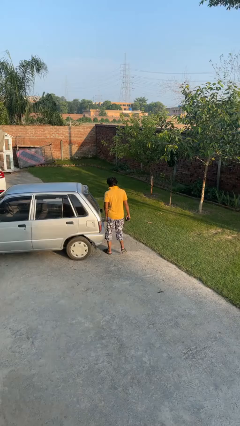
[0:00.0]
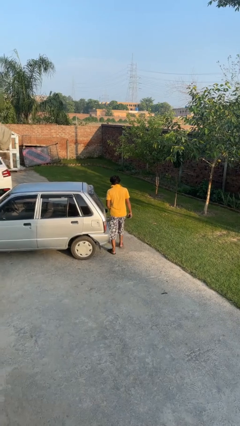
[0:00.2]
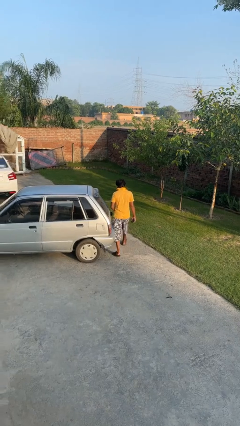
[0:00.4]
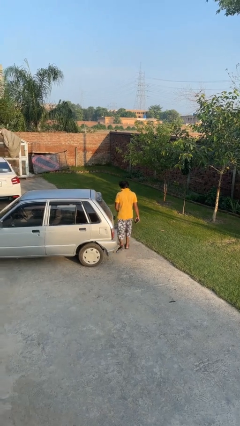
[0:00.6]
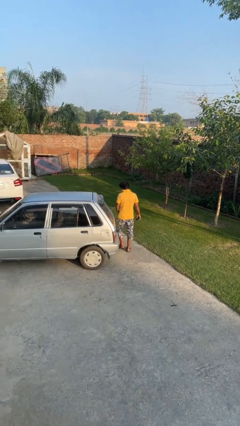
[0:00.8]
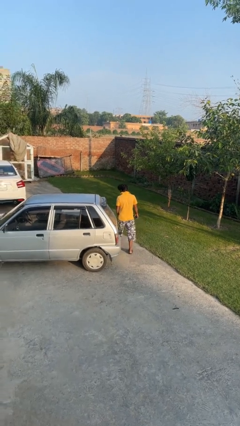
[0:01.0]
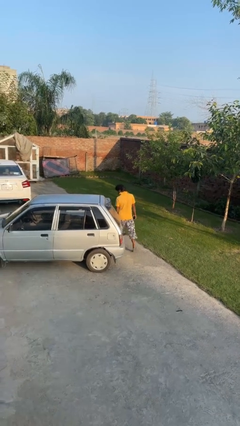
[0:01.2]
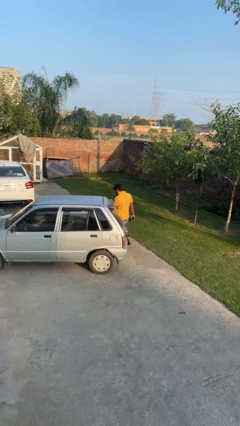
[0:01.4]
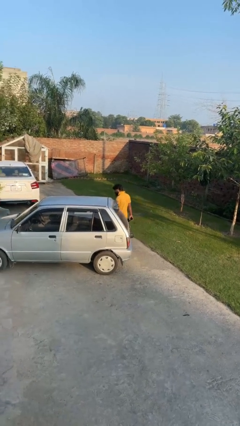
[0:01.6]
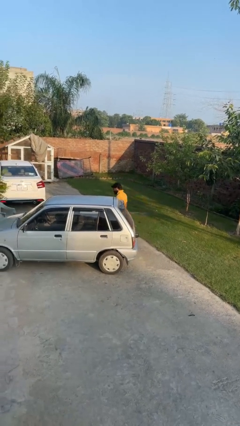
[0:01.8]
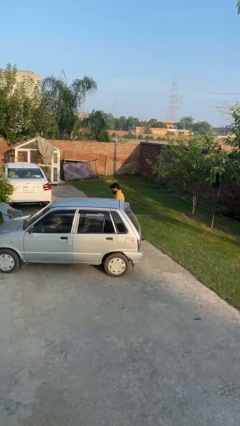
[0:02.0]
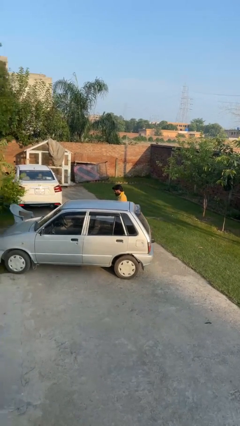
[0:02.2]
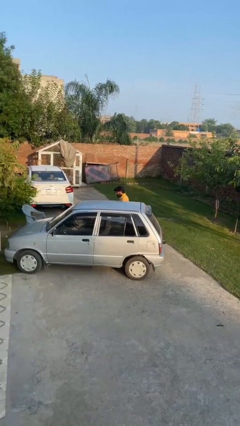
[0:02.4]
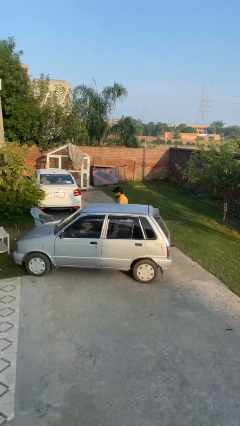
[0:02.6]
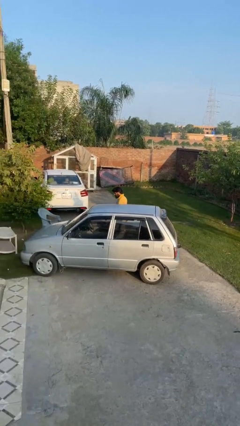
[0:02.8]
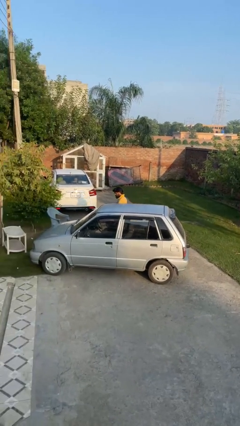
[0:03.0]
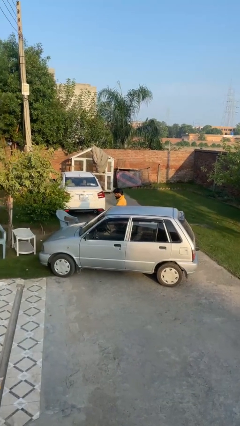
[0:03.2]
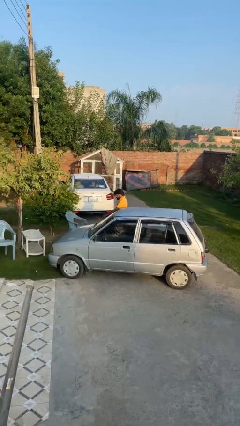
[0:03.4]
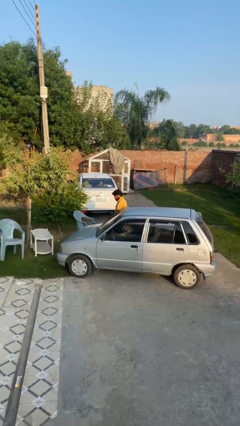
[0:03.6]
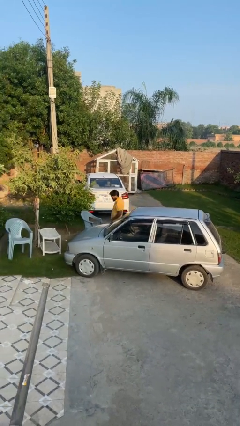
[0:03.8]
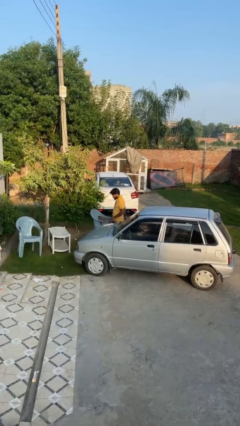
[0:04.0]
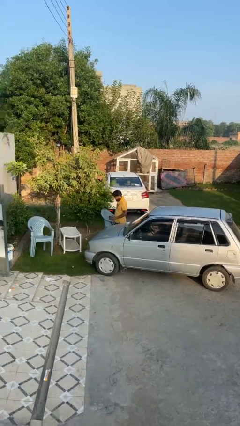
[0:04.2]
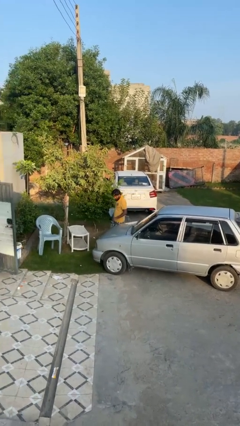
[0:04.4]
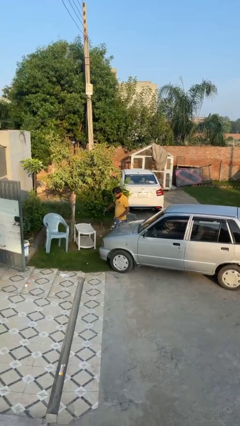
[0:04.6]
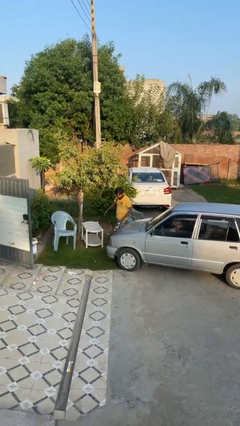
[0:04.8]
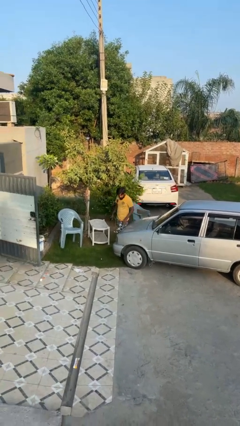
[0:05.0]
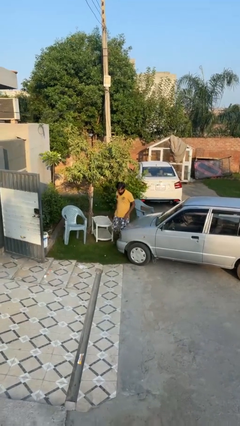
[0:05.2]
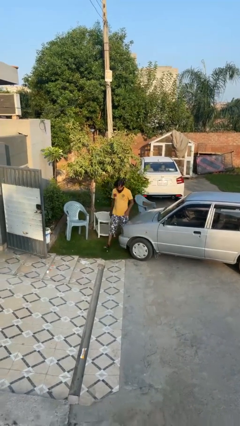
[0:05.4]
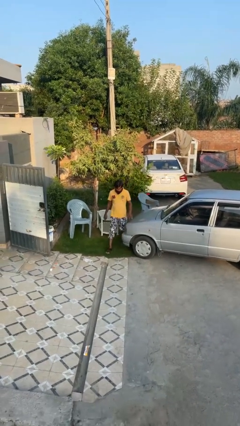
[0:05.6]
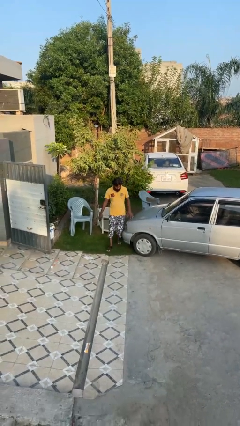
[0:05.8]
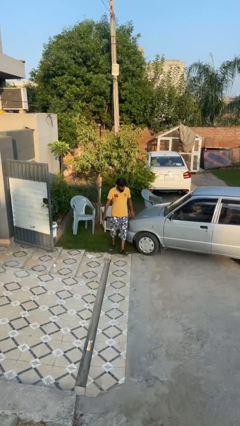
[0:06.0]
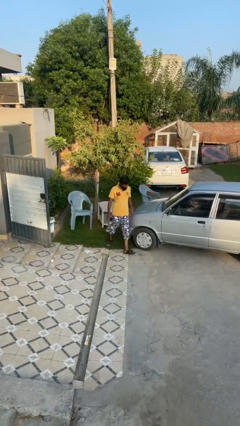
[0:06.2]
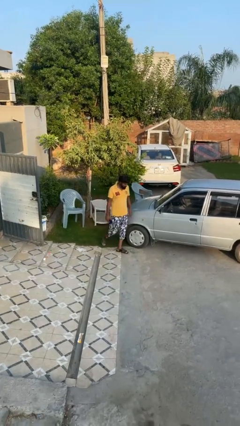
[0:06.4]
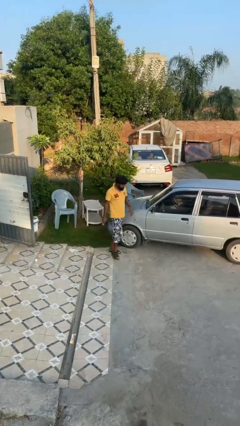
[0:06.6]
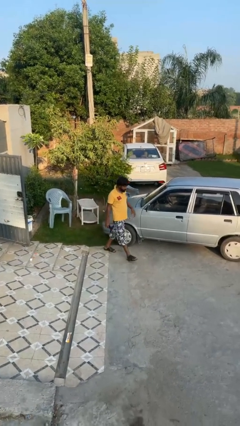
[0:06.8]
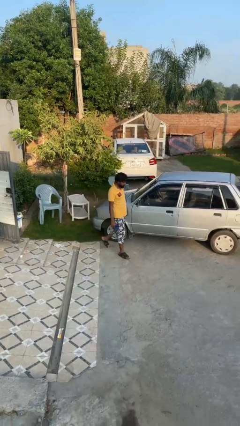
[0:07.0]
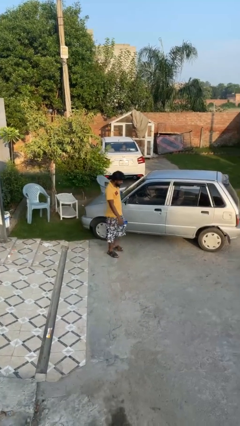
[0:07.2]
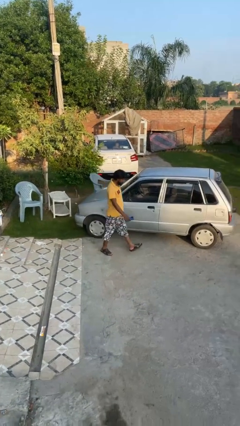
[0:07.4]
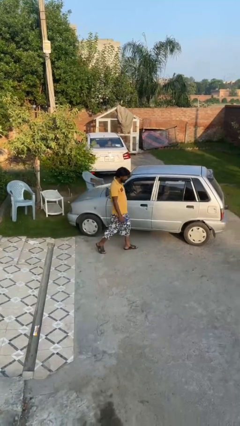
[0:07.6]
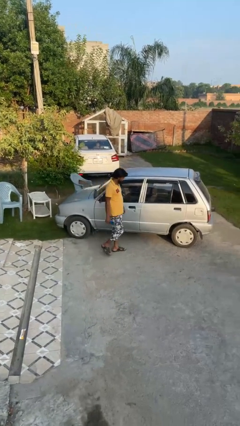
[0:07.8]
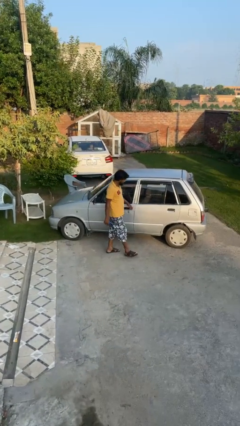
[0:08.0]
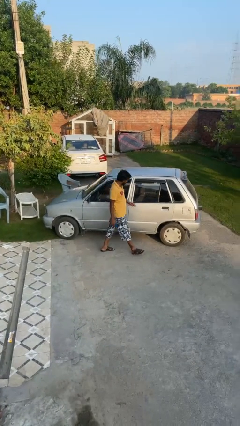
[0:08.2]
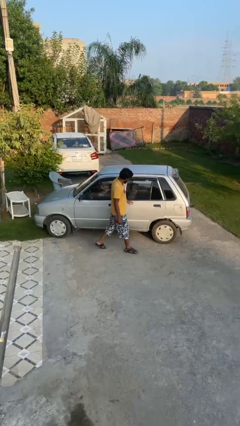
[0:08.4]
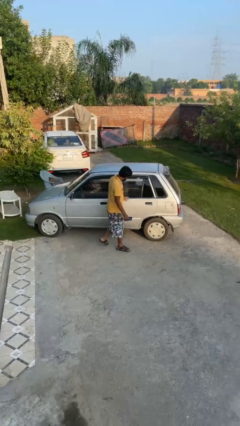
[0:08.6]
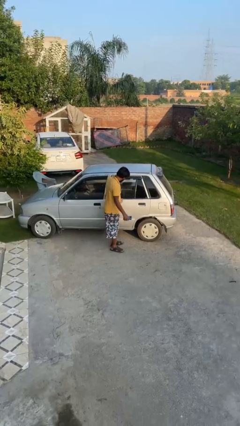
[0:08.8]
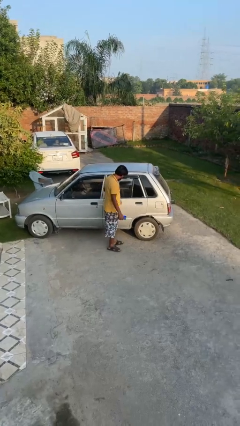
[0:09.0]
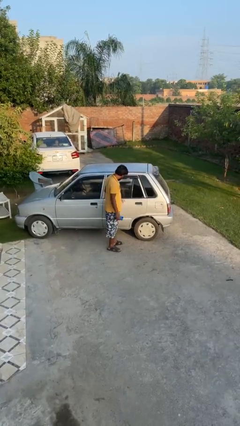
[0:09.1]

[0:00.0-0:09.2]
person walks around car

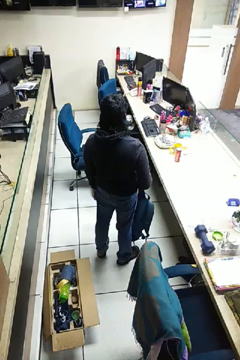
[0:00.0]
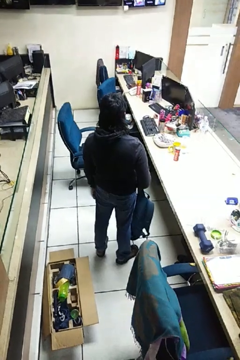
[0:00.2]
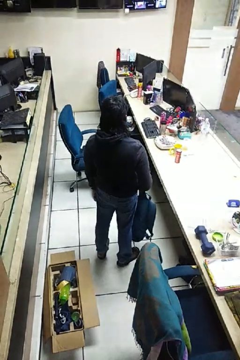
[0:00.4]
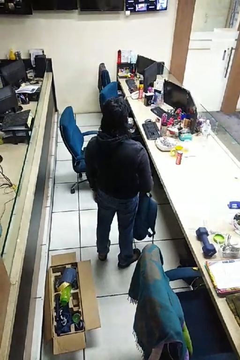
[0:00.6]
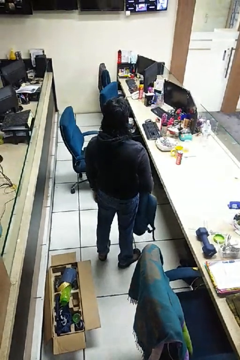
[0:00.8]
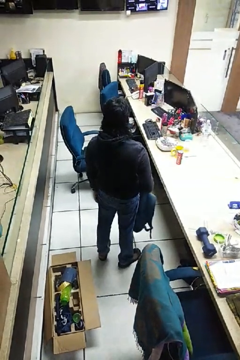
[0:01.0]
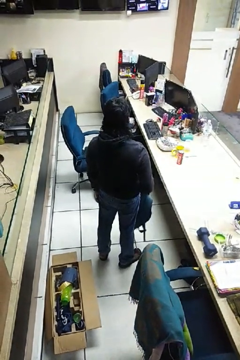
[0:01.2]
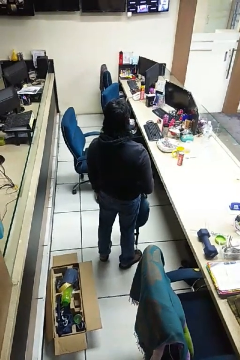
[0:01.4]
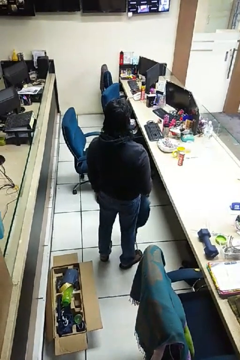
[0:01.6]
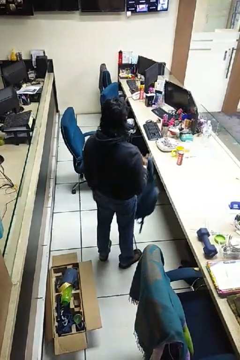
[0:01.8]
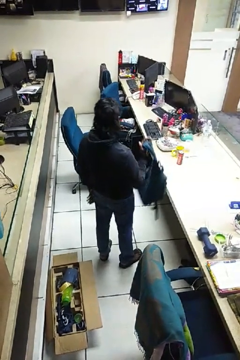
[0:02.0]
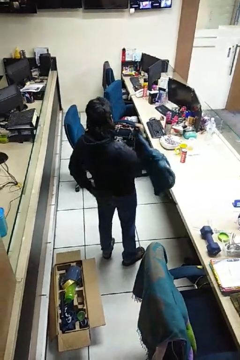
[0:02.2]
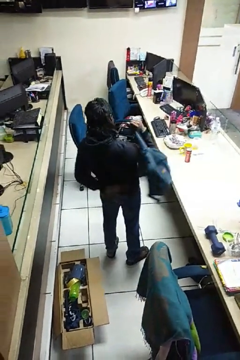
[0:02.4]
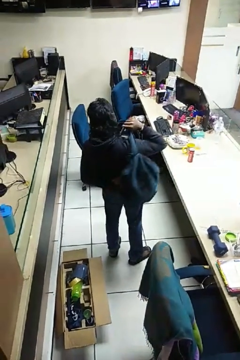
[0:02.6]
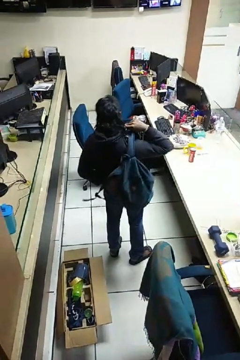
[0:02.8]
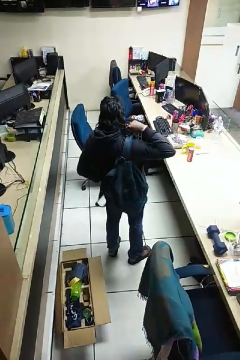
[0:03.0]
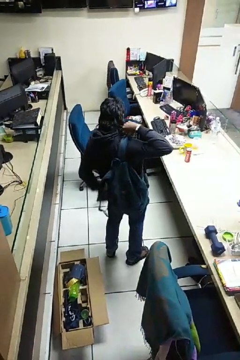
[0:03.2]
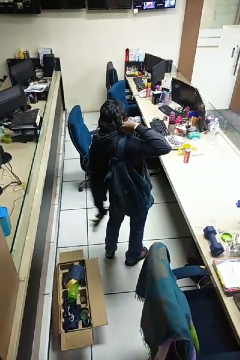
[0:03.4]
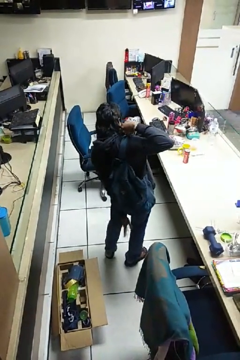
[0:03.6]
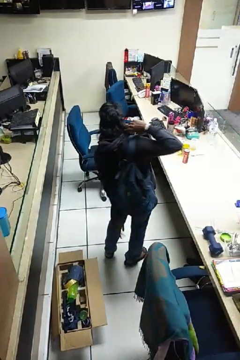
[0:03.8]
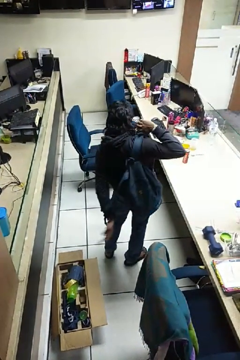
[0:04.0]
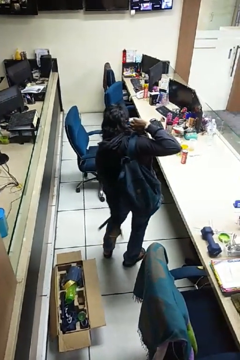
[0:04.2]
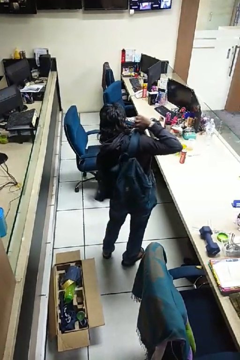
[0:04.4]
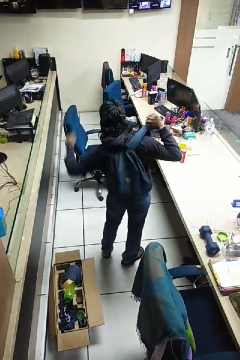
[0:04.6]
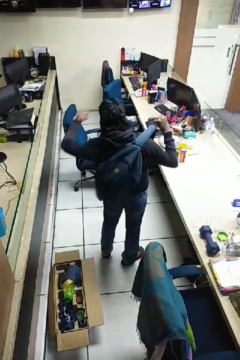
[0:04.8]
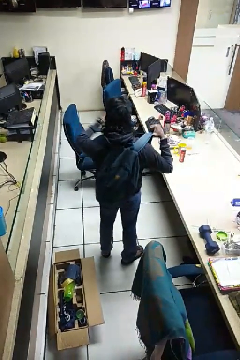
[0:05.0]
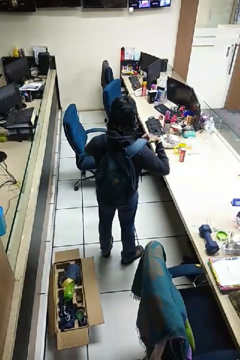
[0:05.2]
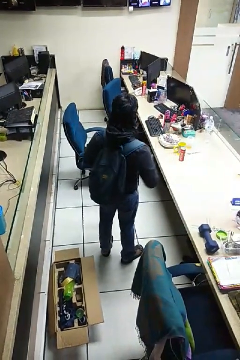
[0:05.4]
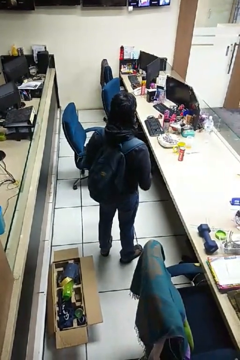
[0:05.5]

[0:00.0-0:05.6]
person puts on backpack

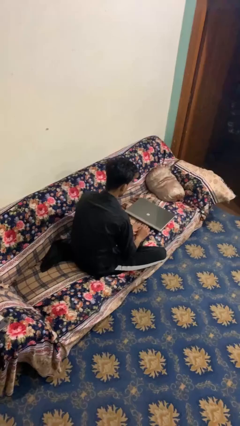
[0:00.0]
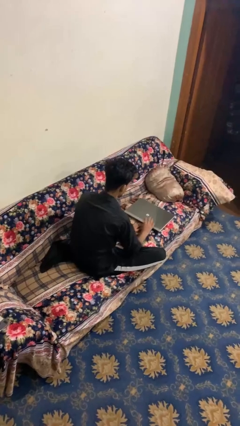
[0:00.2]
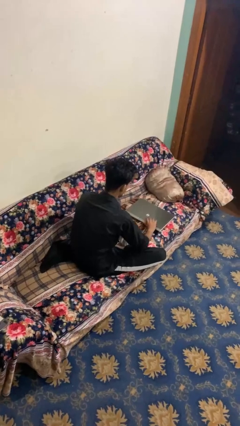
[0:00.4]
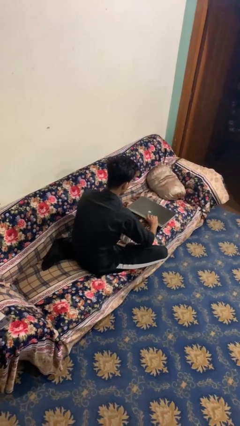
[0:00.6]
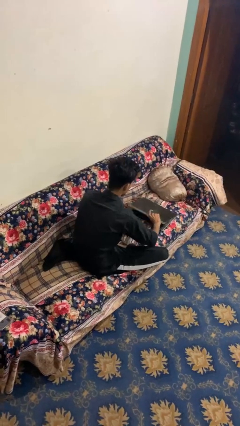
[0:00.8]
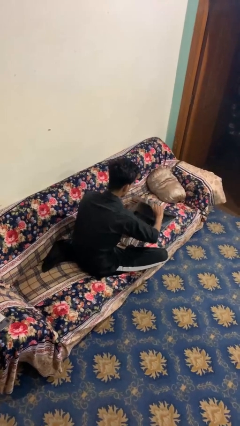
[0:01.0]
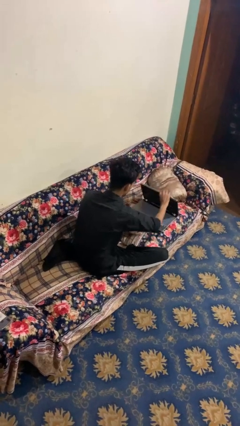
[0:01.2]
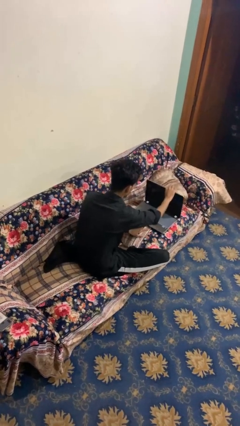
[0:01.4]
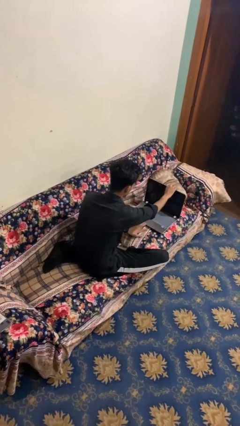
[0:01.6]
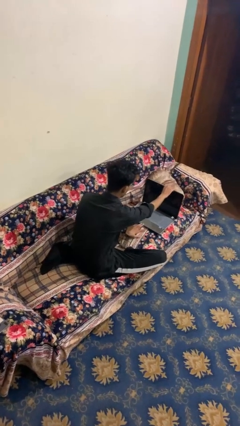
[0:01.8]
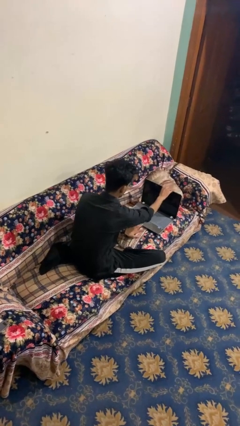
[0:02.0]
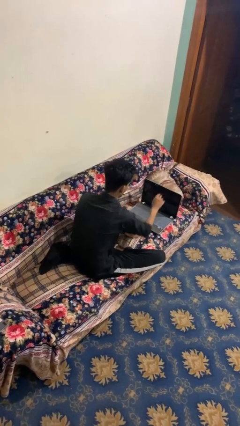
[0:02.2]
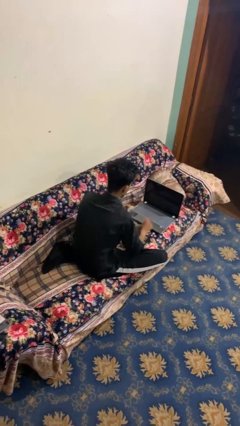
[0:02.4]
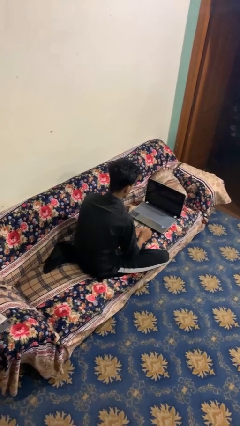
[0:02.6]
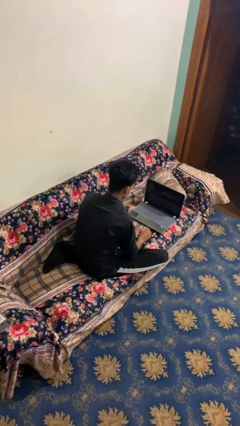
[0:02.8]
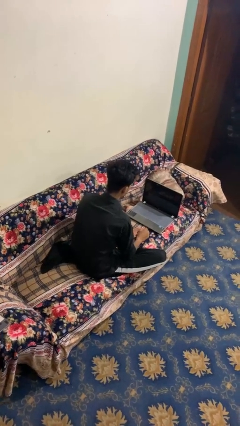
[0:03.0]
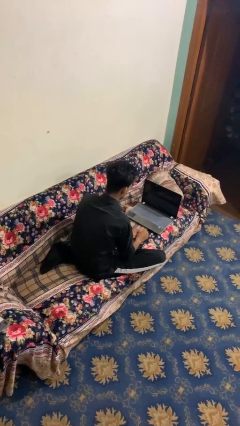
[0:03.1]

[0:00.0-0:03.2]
person opens laptop

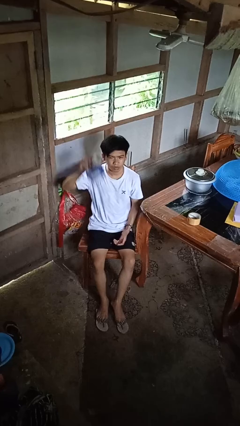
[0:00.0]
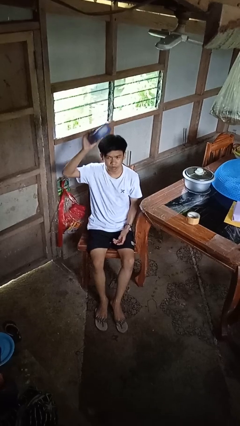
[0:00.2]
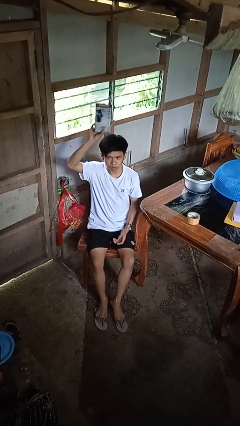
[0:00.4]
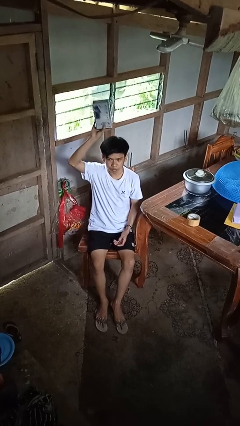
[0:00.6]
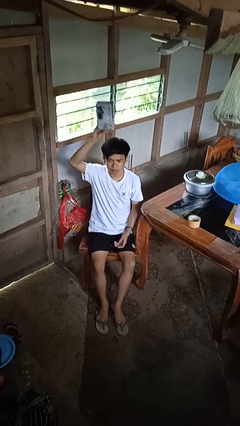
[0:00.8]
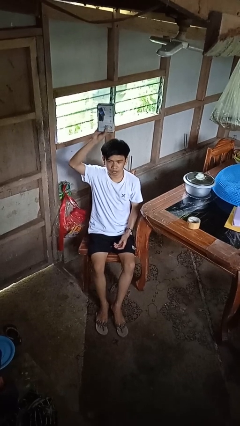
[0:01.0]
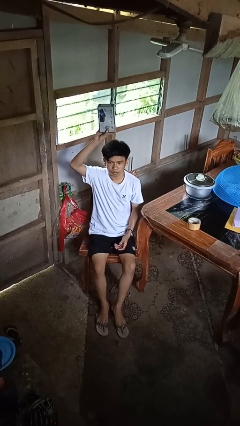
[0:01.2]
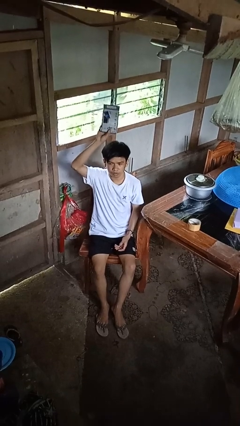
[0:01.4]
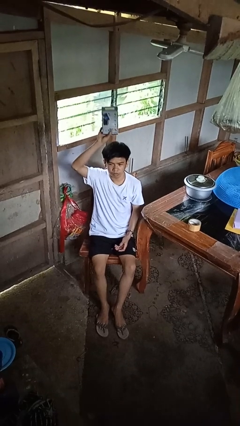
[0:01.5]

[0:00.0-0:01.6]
person holds object above head
